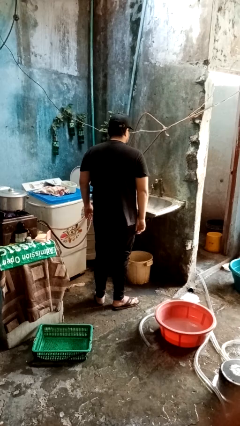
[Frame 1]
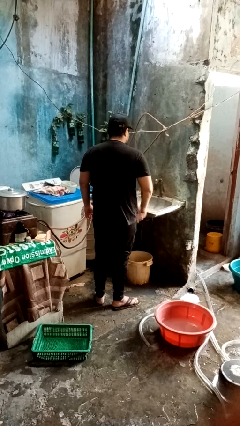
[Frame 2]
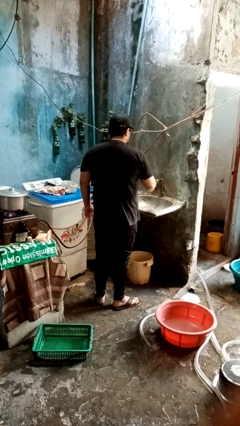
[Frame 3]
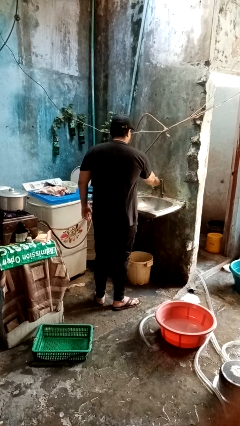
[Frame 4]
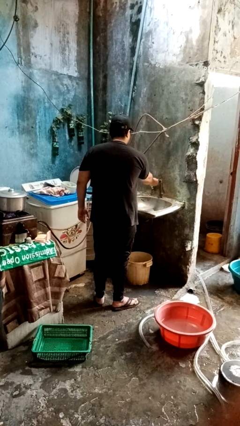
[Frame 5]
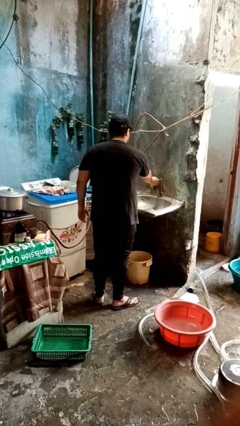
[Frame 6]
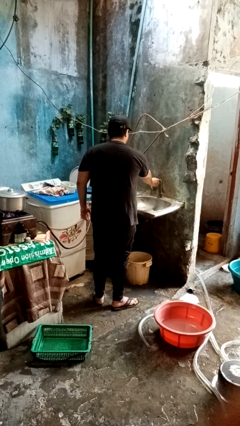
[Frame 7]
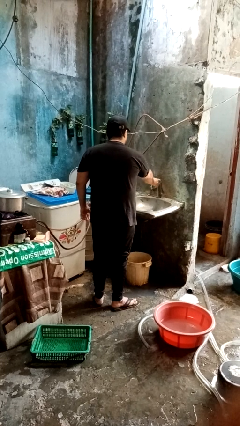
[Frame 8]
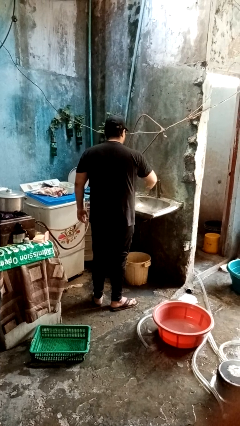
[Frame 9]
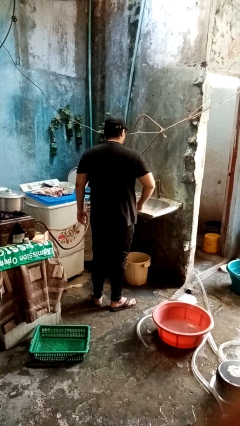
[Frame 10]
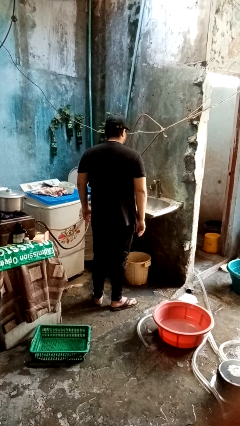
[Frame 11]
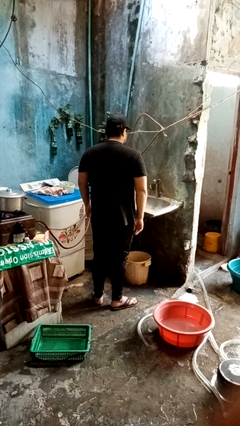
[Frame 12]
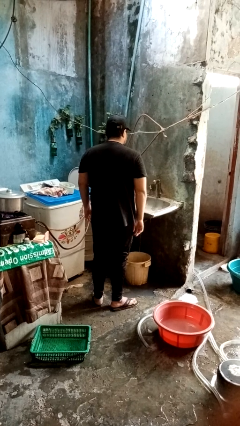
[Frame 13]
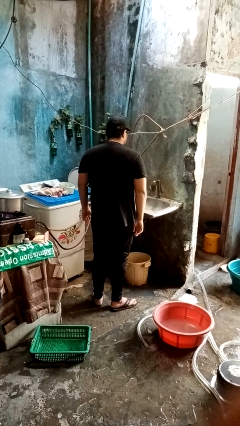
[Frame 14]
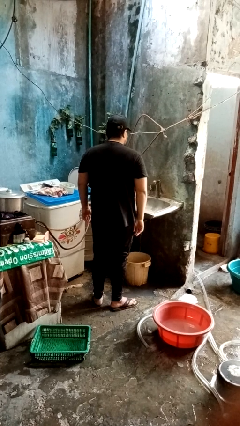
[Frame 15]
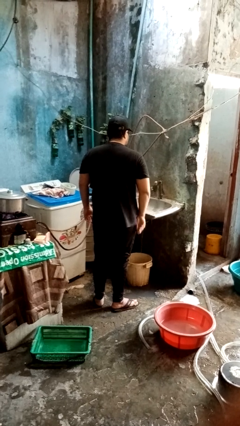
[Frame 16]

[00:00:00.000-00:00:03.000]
person turns on faucet

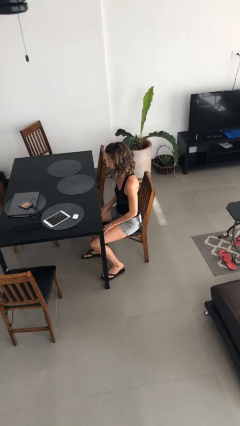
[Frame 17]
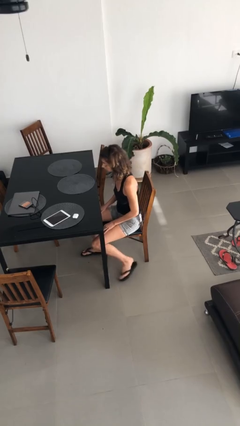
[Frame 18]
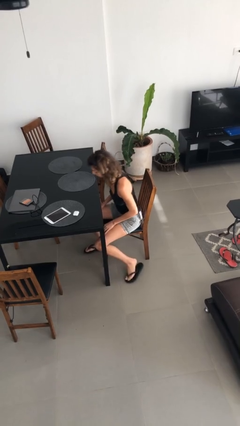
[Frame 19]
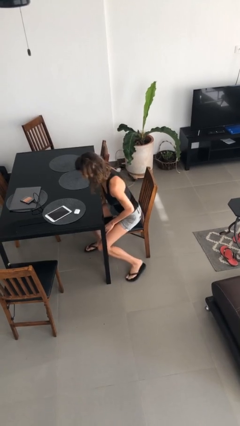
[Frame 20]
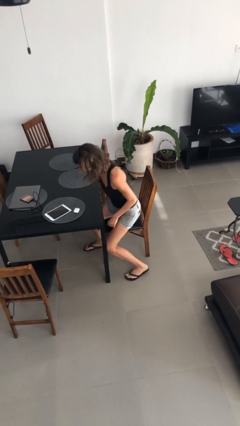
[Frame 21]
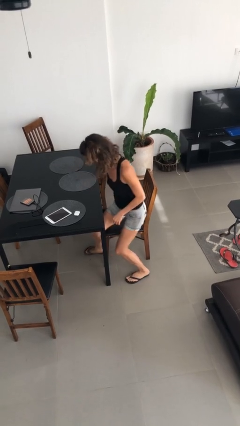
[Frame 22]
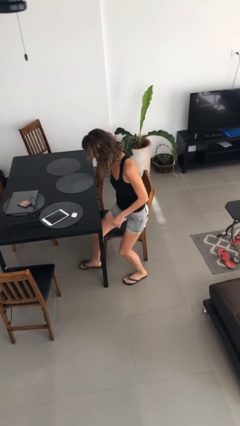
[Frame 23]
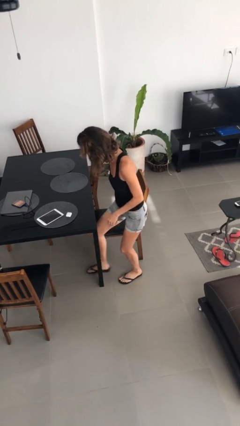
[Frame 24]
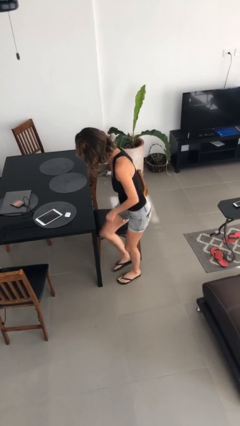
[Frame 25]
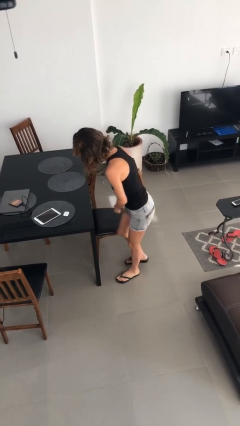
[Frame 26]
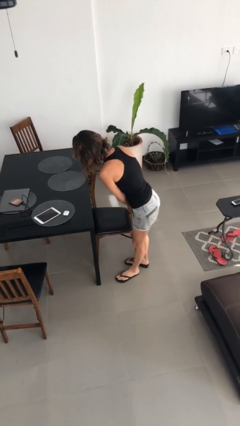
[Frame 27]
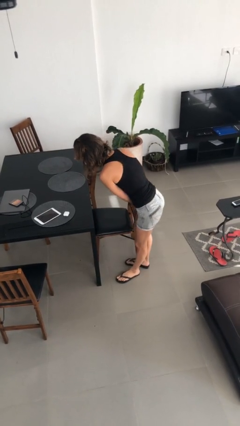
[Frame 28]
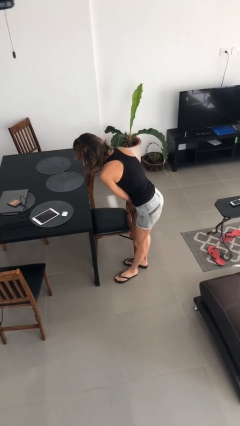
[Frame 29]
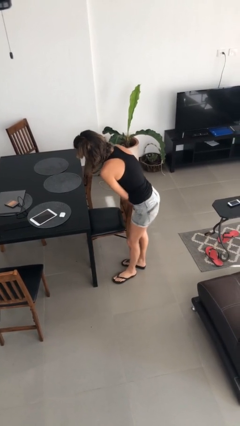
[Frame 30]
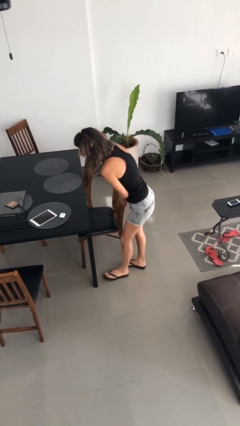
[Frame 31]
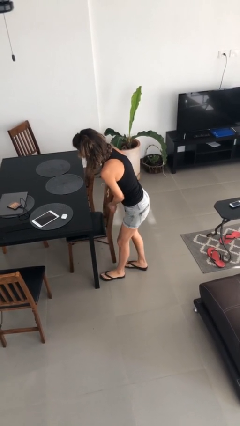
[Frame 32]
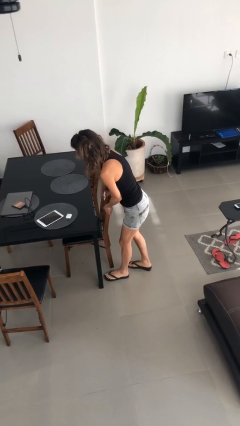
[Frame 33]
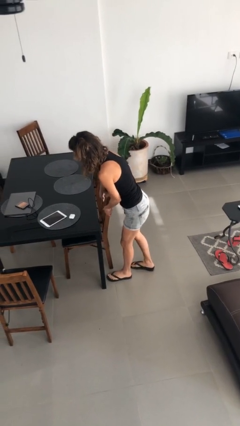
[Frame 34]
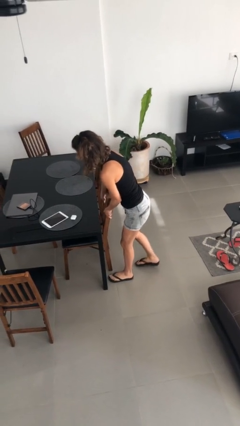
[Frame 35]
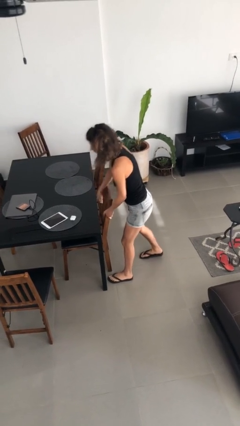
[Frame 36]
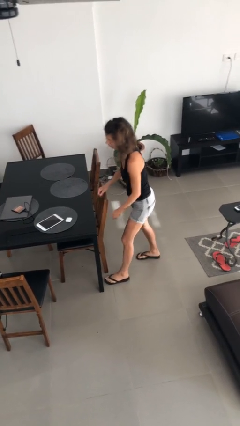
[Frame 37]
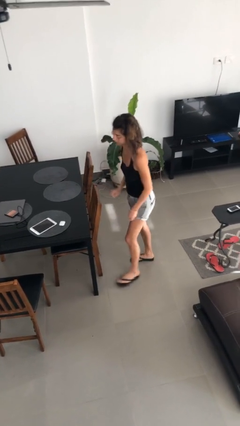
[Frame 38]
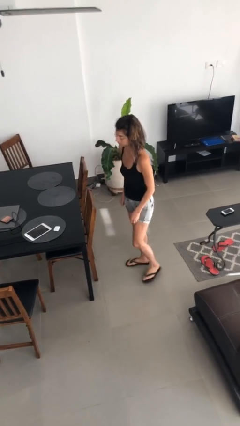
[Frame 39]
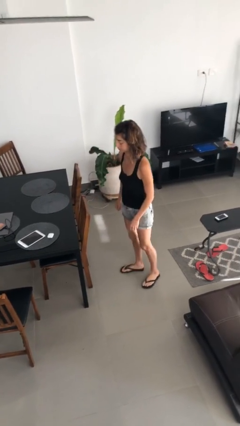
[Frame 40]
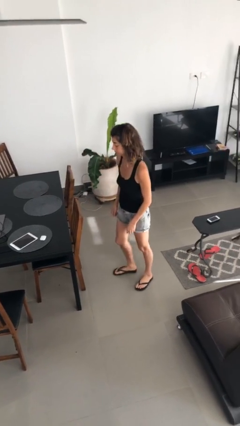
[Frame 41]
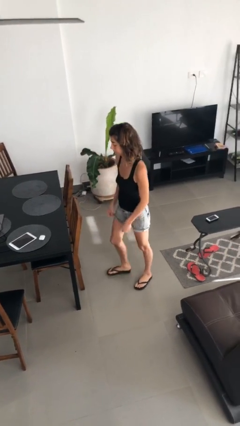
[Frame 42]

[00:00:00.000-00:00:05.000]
person stands up

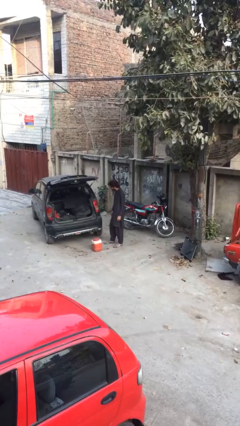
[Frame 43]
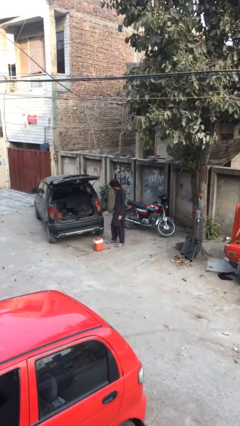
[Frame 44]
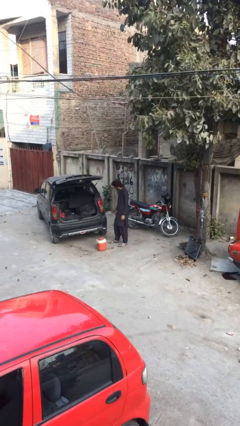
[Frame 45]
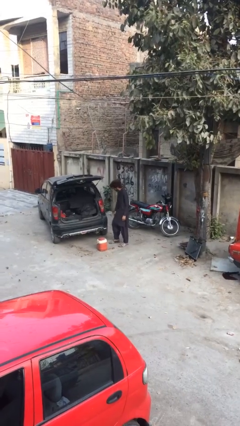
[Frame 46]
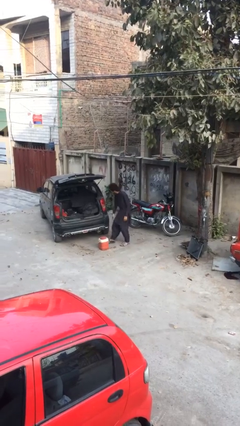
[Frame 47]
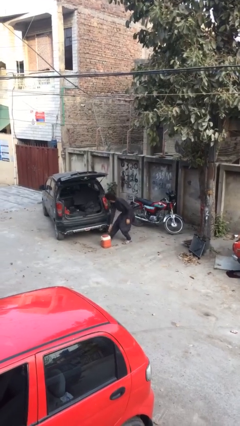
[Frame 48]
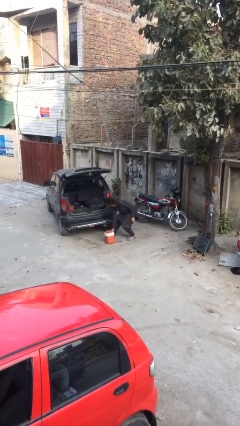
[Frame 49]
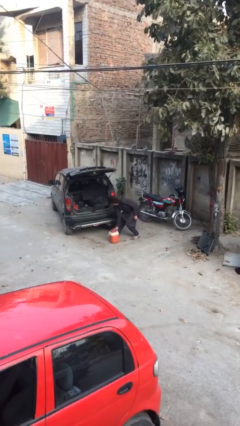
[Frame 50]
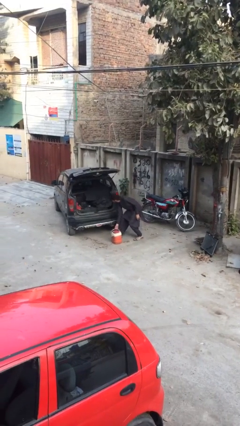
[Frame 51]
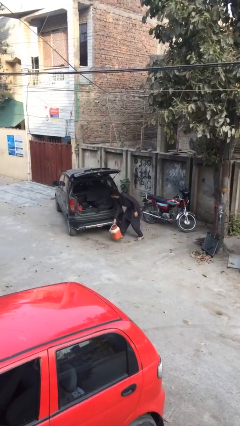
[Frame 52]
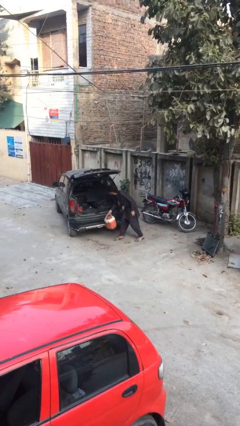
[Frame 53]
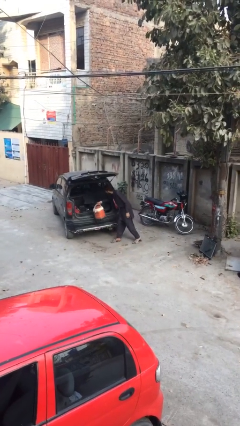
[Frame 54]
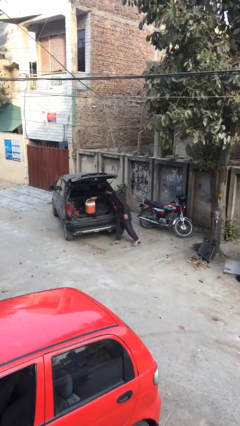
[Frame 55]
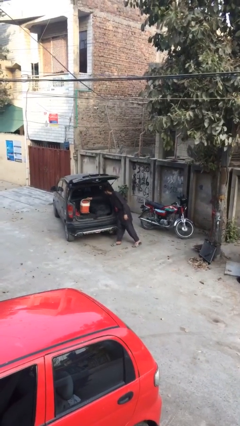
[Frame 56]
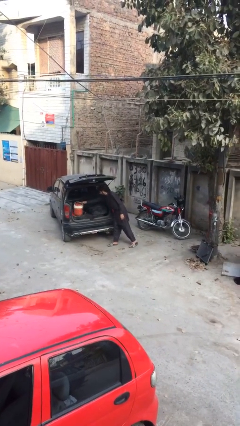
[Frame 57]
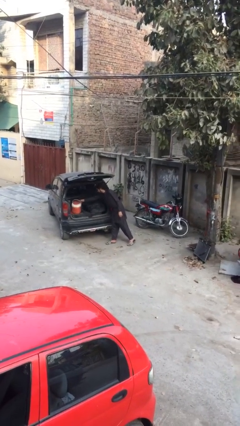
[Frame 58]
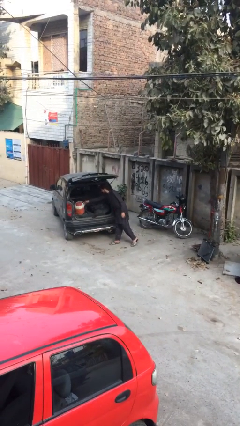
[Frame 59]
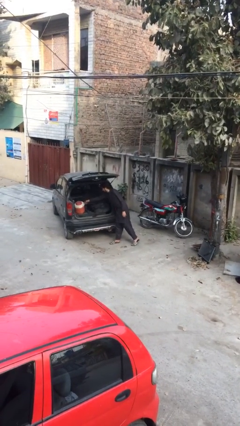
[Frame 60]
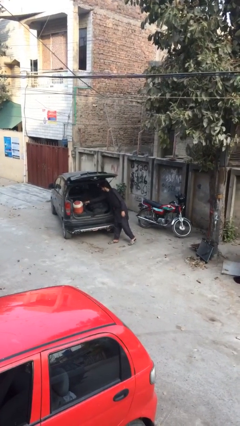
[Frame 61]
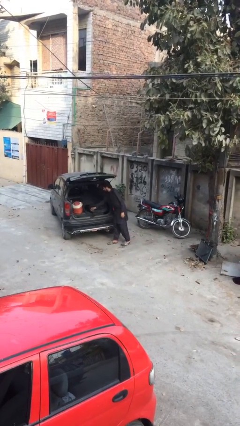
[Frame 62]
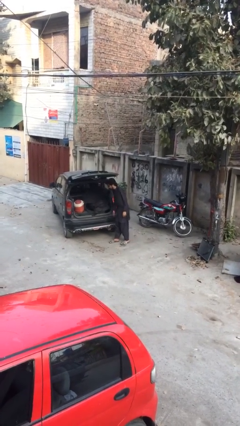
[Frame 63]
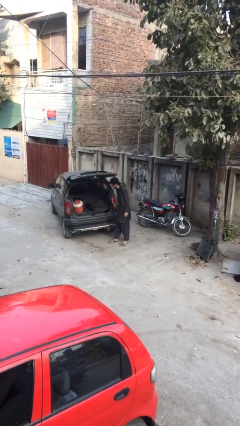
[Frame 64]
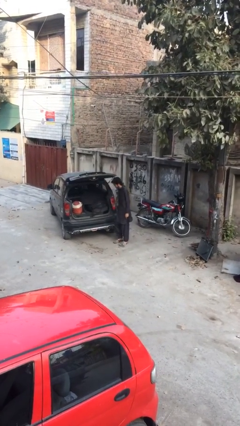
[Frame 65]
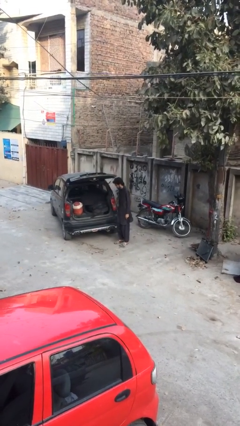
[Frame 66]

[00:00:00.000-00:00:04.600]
person loads car

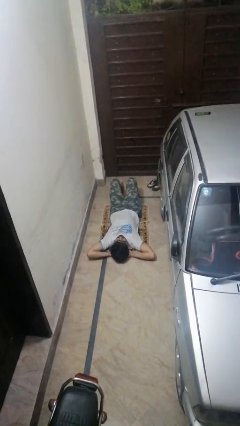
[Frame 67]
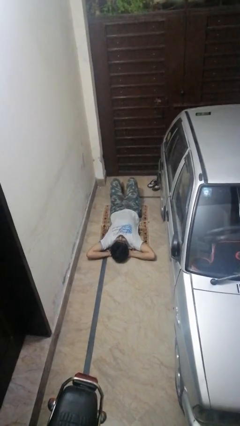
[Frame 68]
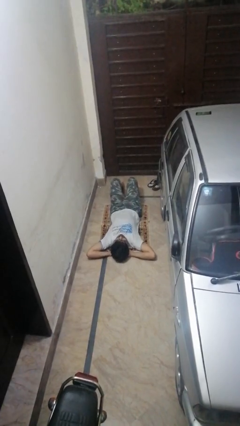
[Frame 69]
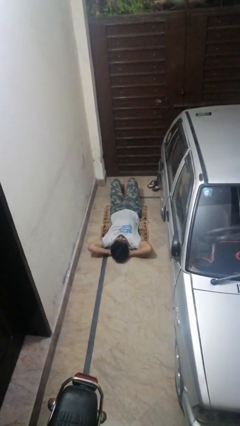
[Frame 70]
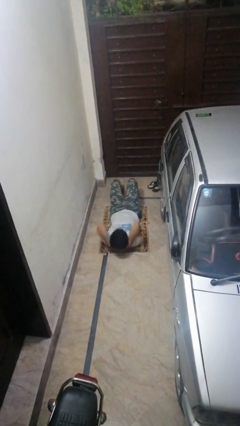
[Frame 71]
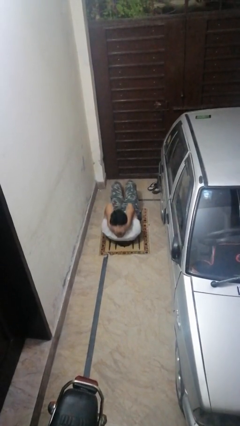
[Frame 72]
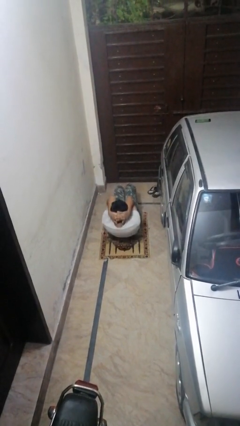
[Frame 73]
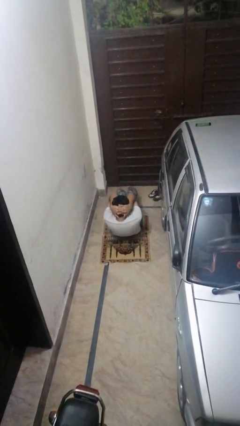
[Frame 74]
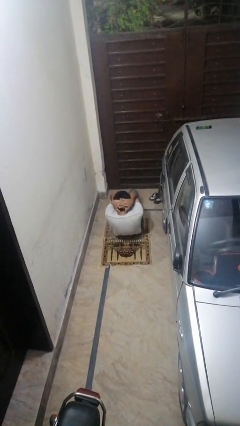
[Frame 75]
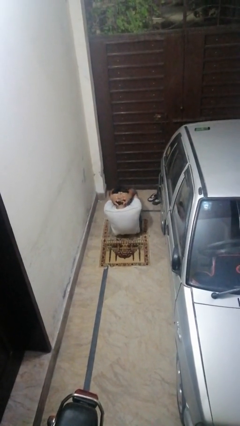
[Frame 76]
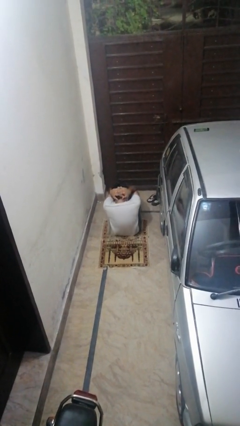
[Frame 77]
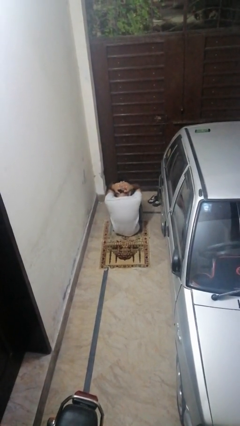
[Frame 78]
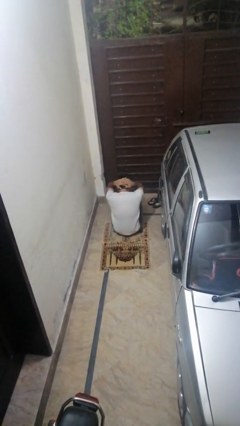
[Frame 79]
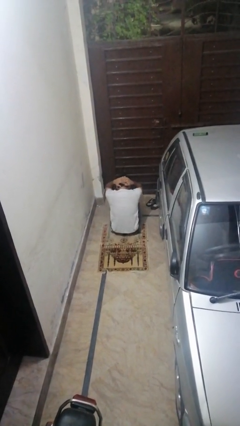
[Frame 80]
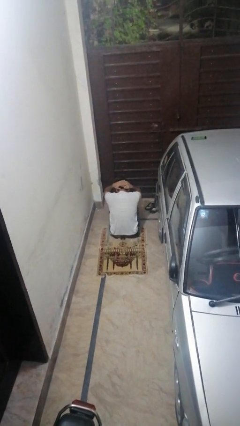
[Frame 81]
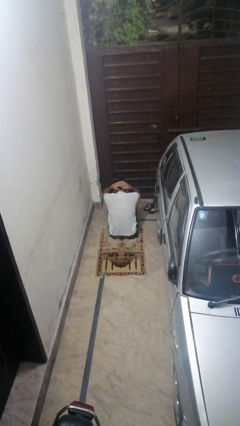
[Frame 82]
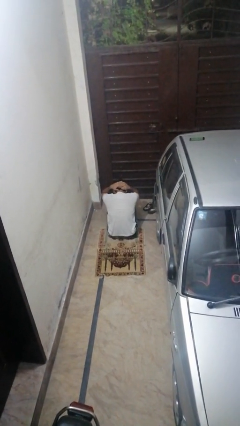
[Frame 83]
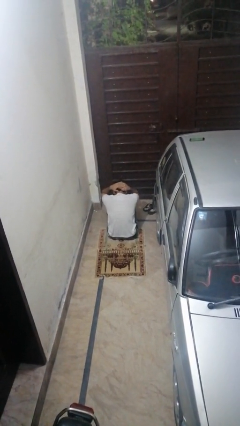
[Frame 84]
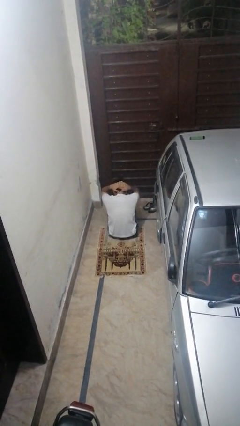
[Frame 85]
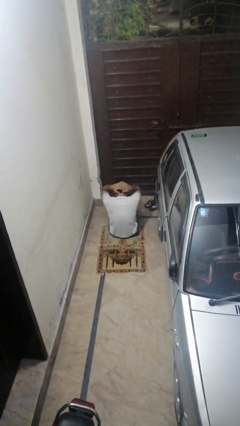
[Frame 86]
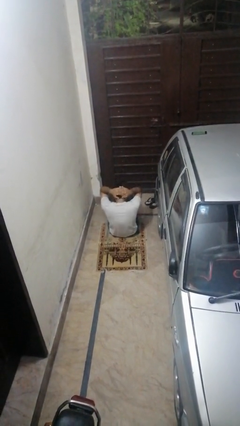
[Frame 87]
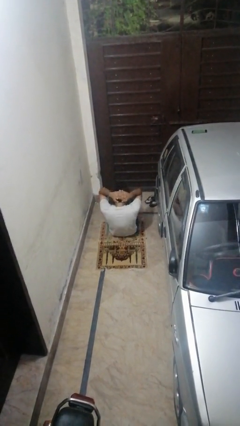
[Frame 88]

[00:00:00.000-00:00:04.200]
person exercises with situp

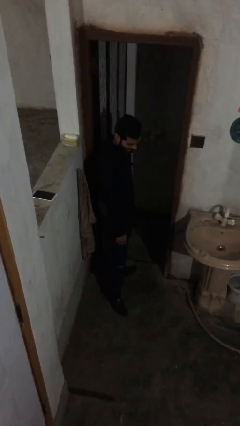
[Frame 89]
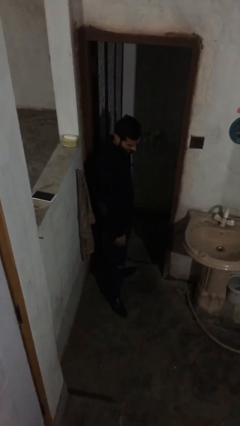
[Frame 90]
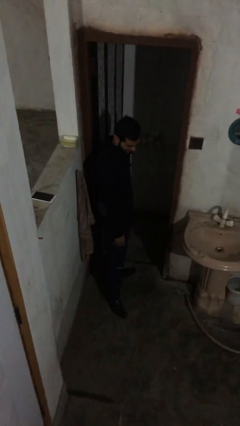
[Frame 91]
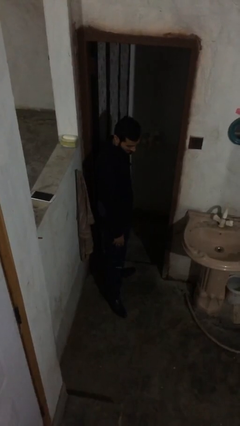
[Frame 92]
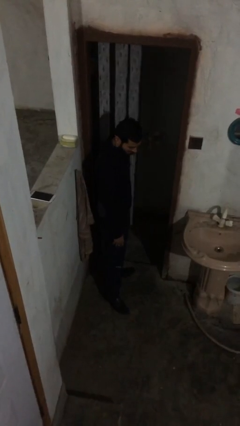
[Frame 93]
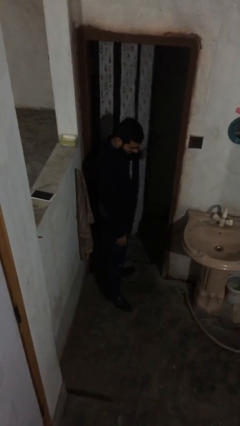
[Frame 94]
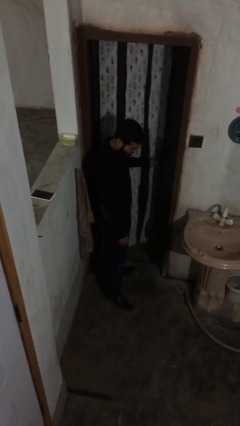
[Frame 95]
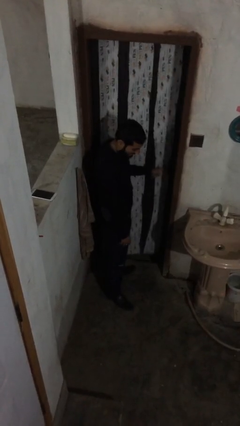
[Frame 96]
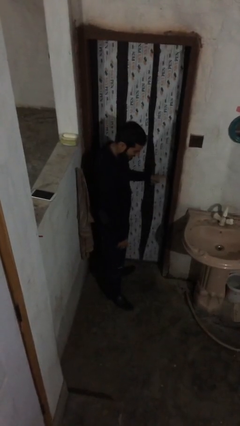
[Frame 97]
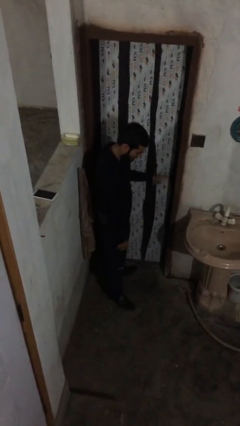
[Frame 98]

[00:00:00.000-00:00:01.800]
person closes facility door
